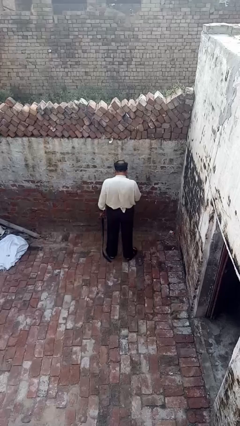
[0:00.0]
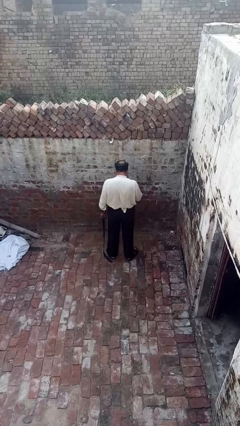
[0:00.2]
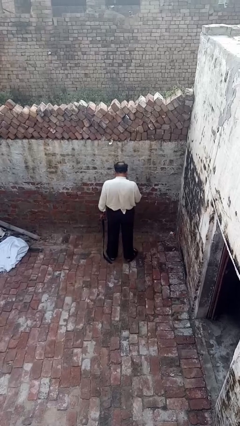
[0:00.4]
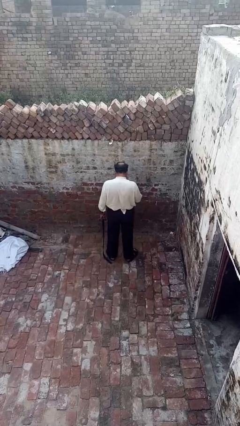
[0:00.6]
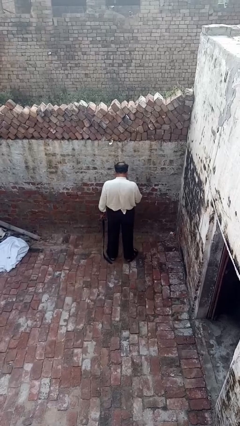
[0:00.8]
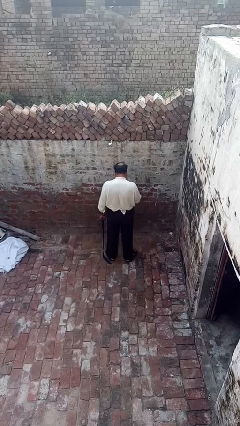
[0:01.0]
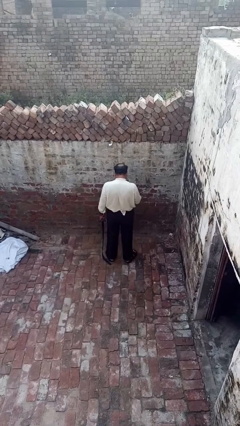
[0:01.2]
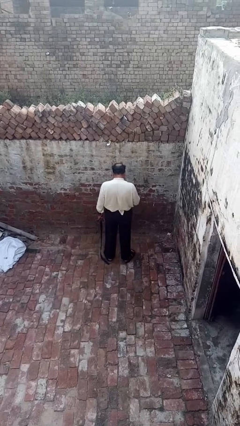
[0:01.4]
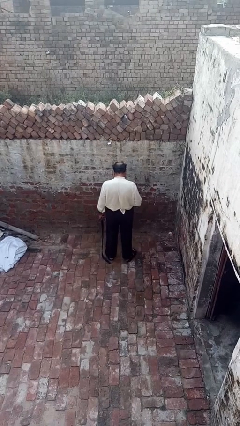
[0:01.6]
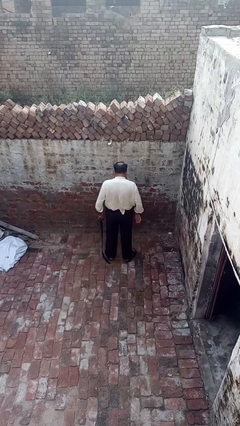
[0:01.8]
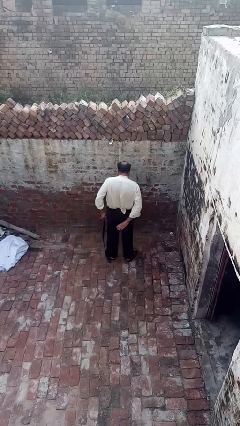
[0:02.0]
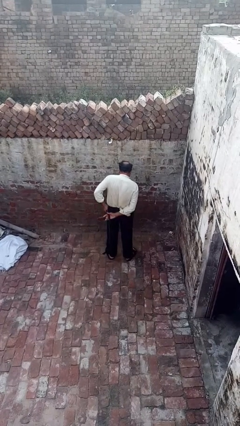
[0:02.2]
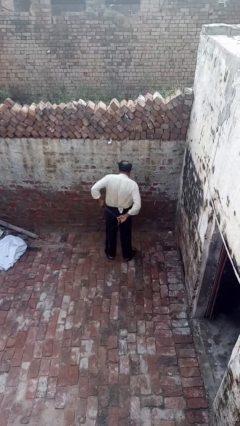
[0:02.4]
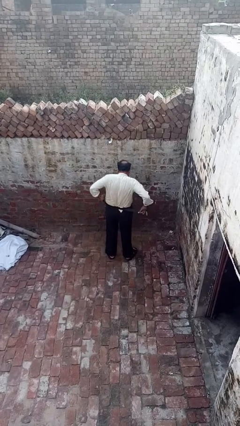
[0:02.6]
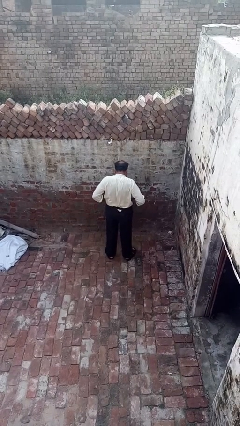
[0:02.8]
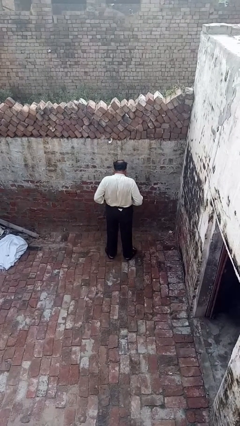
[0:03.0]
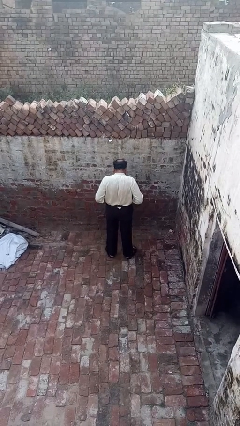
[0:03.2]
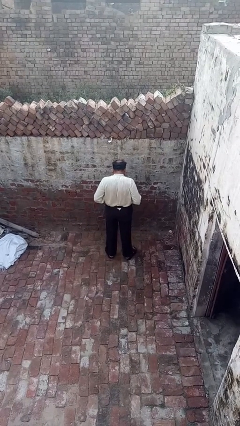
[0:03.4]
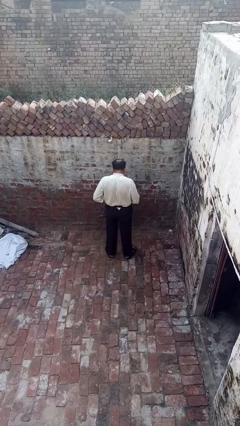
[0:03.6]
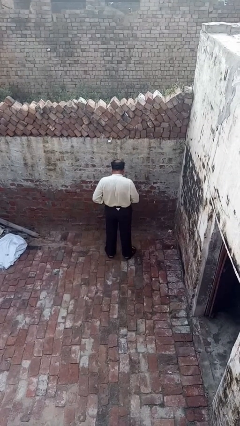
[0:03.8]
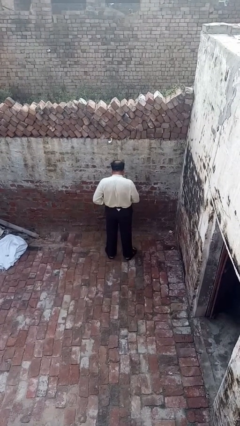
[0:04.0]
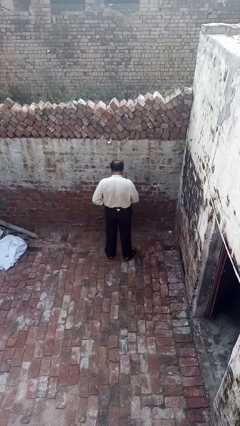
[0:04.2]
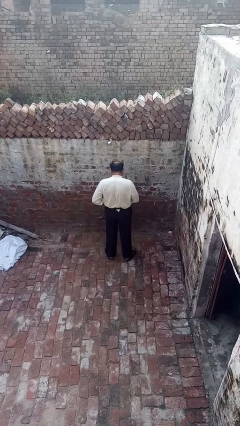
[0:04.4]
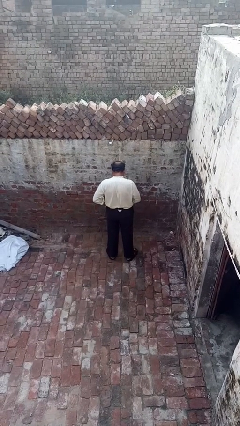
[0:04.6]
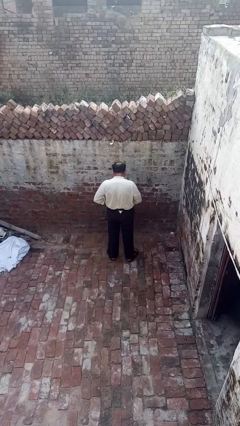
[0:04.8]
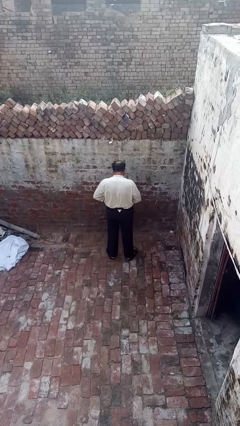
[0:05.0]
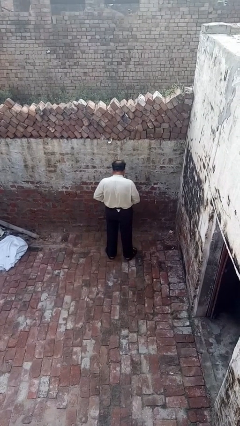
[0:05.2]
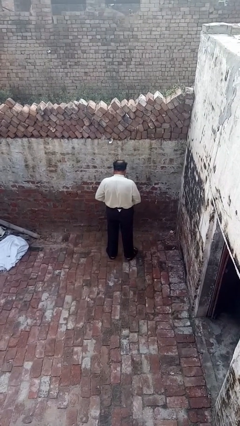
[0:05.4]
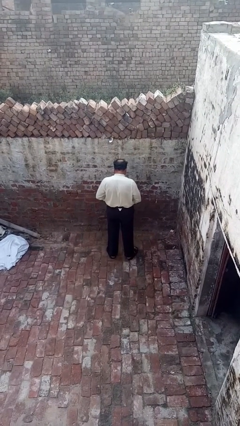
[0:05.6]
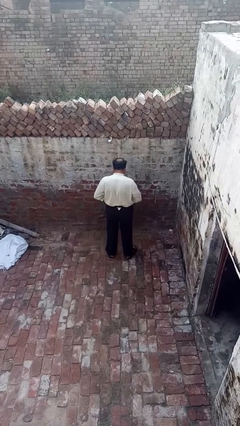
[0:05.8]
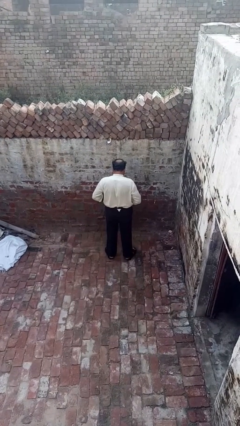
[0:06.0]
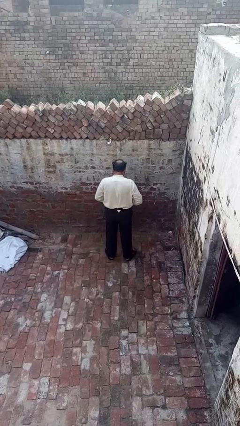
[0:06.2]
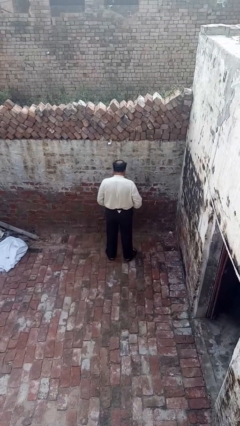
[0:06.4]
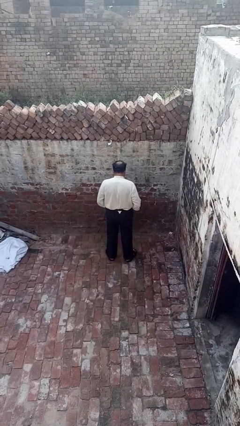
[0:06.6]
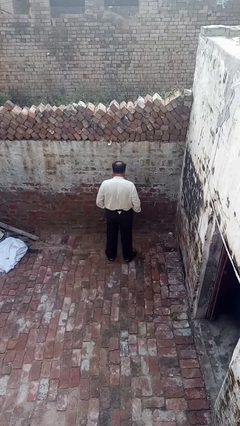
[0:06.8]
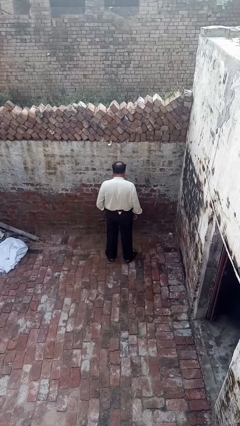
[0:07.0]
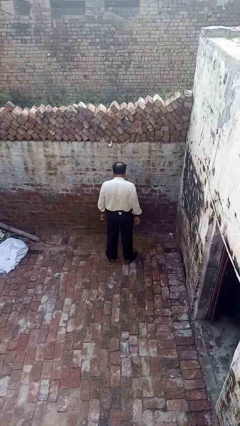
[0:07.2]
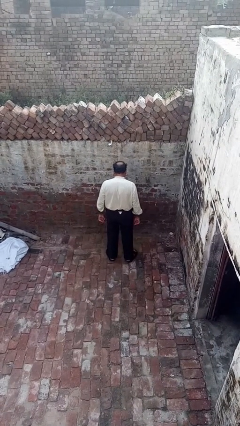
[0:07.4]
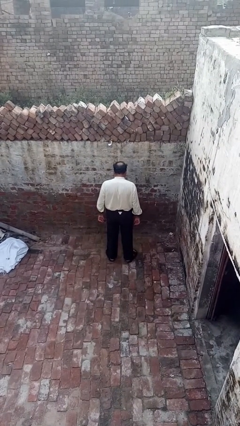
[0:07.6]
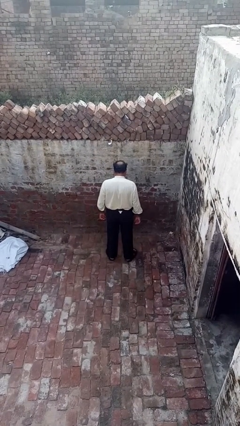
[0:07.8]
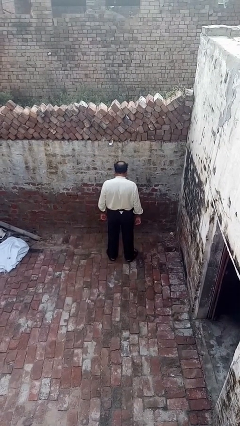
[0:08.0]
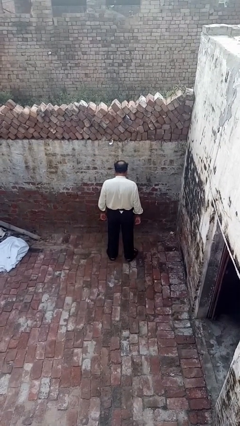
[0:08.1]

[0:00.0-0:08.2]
person puts on belt

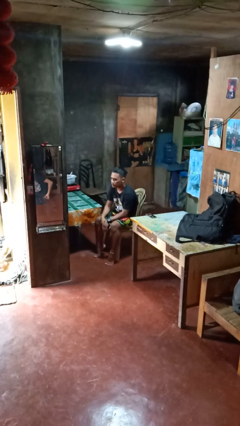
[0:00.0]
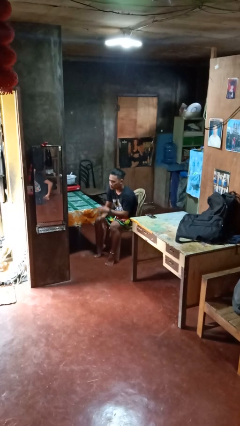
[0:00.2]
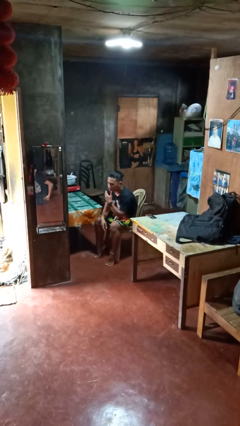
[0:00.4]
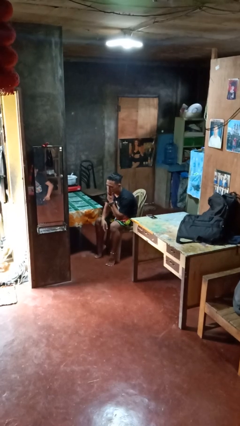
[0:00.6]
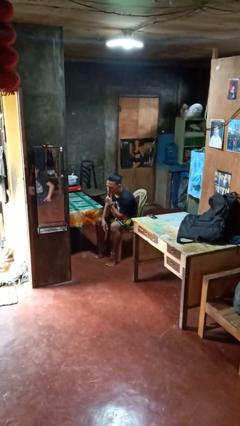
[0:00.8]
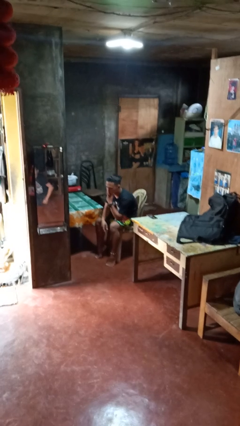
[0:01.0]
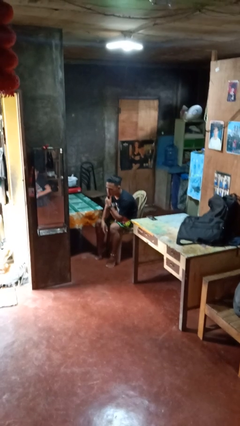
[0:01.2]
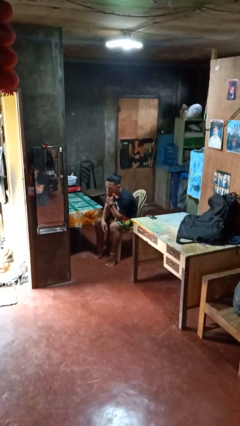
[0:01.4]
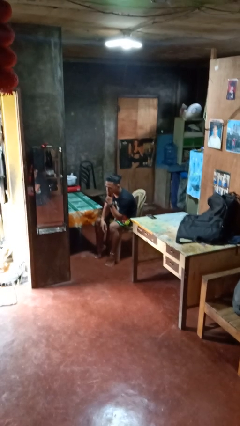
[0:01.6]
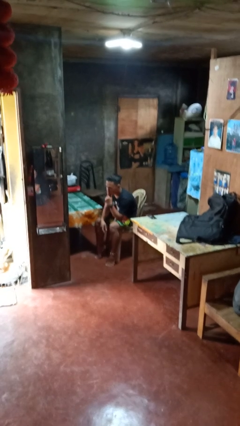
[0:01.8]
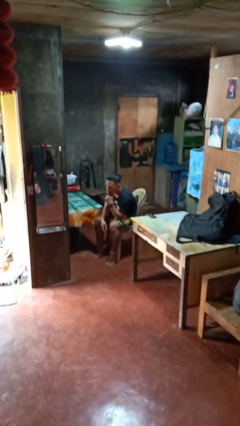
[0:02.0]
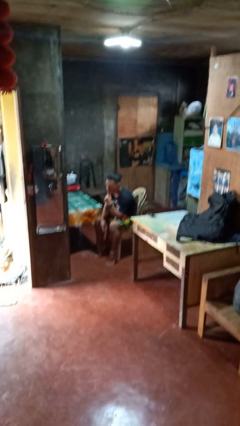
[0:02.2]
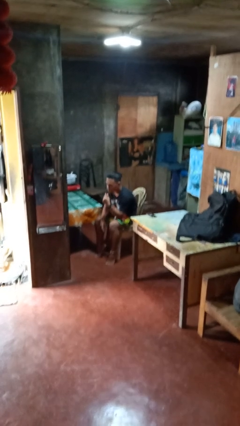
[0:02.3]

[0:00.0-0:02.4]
person strokes chin

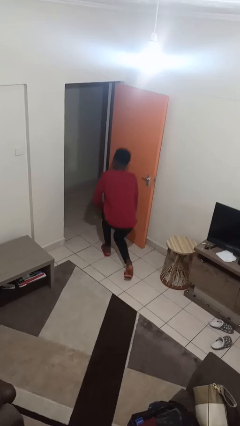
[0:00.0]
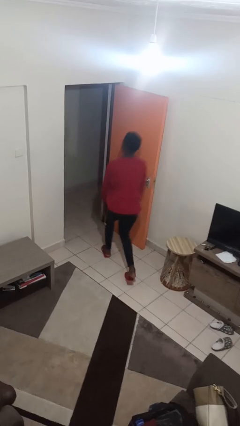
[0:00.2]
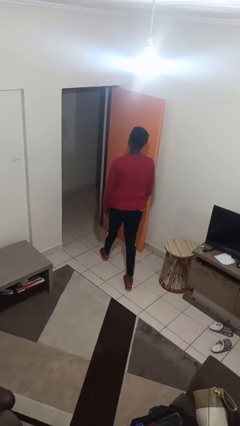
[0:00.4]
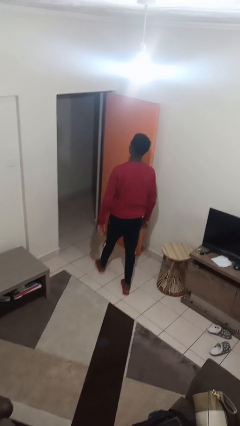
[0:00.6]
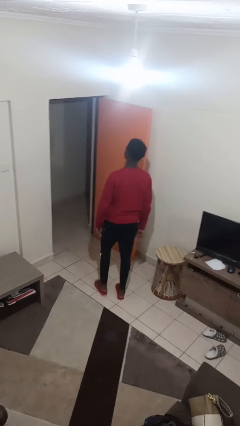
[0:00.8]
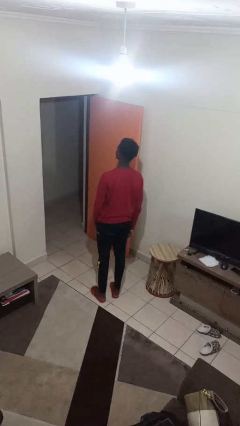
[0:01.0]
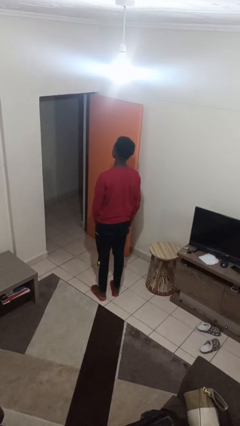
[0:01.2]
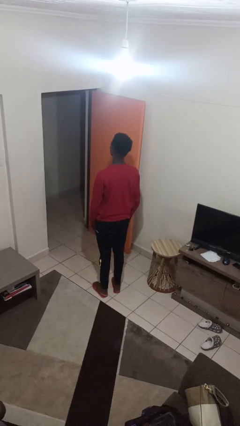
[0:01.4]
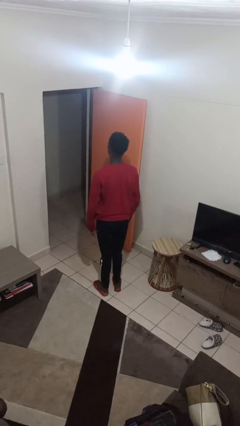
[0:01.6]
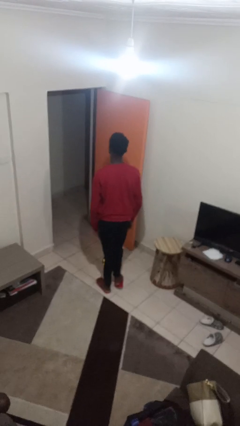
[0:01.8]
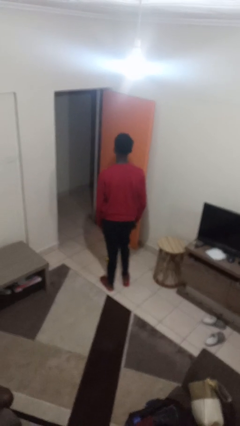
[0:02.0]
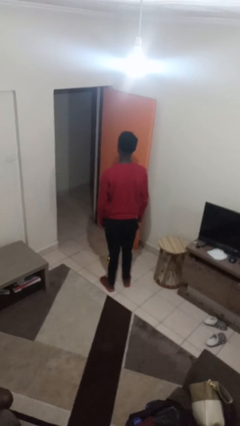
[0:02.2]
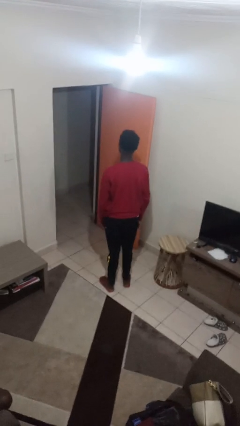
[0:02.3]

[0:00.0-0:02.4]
person stands up from floor

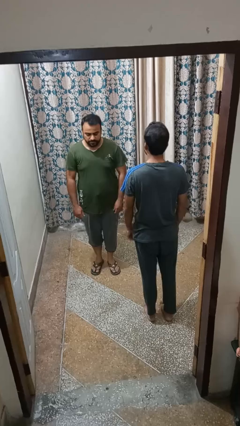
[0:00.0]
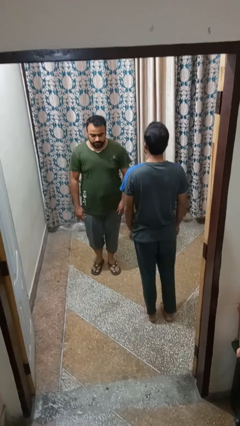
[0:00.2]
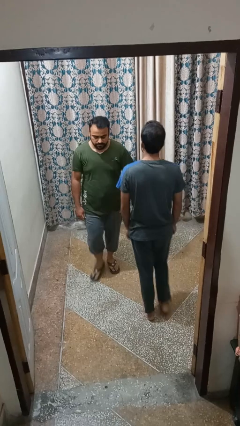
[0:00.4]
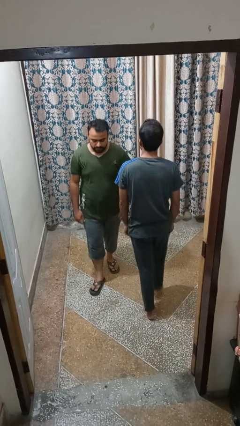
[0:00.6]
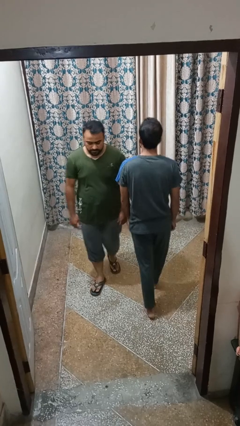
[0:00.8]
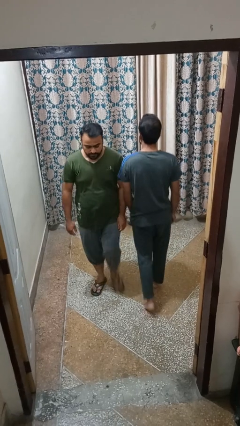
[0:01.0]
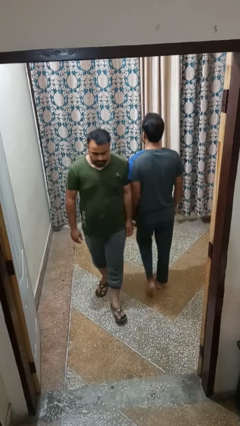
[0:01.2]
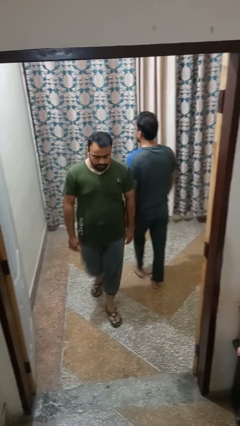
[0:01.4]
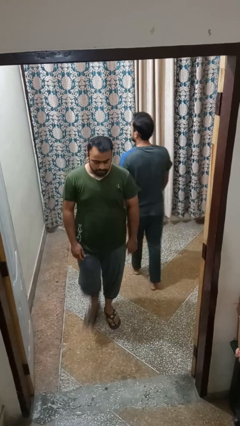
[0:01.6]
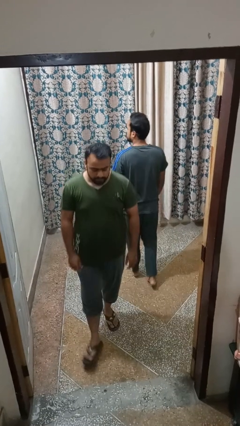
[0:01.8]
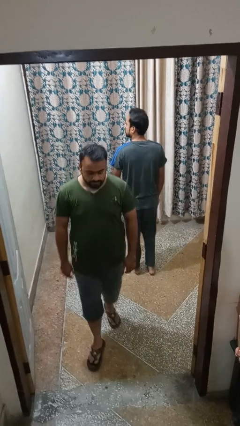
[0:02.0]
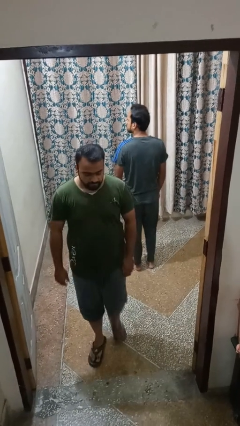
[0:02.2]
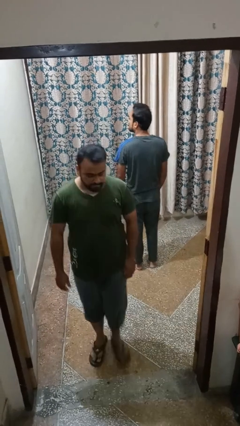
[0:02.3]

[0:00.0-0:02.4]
person bumps into person

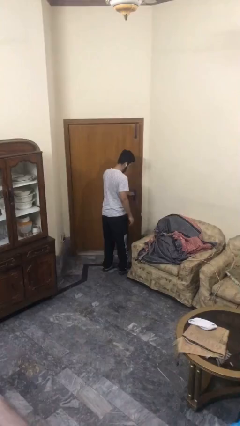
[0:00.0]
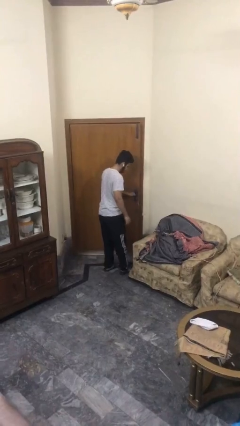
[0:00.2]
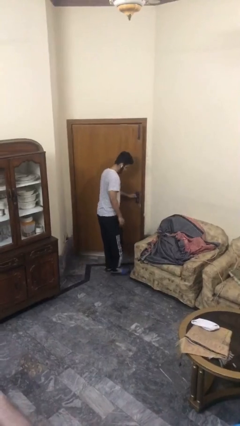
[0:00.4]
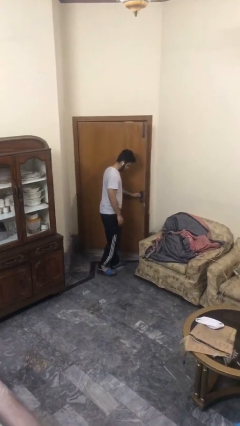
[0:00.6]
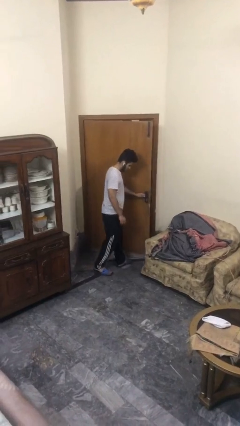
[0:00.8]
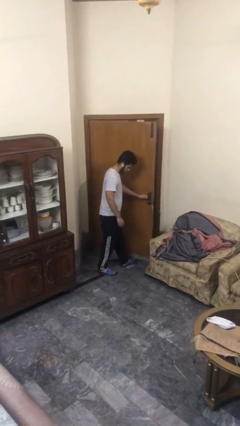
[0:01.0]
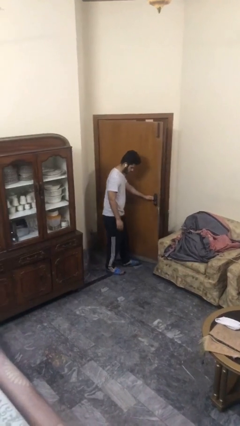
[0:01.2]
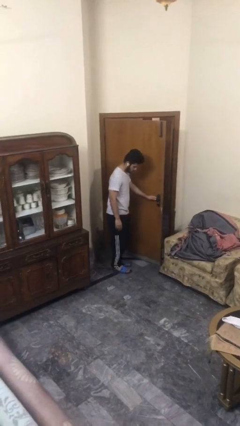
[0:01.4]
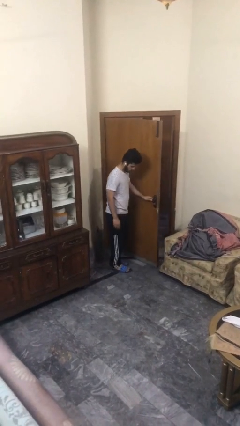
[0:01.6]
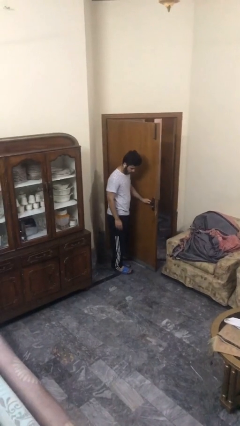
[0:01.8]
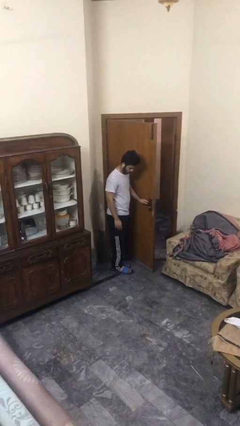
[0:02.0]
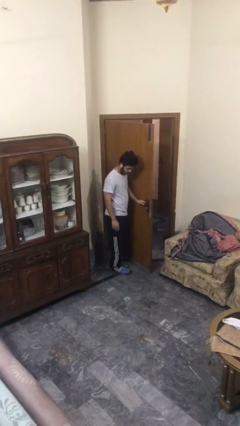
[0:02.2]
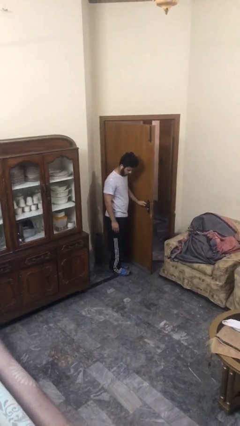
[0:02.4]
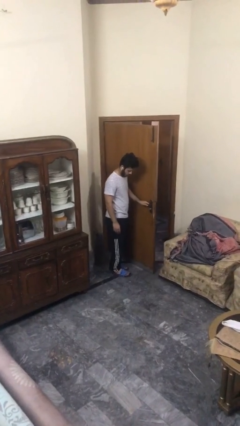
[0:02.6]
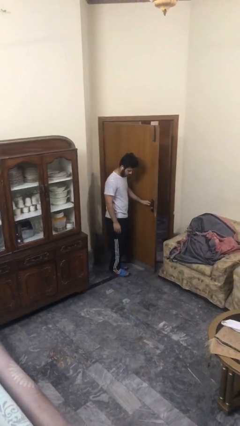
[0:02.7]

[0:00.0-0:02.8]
person opens facility door
